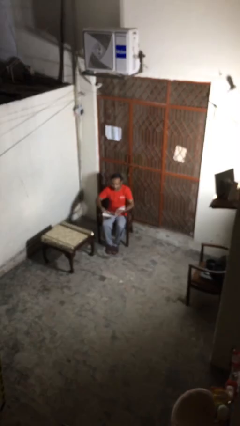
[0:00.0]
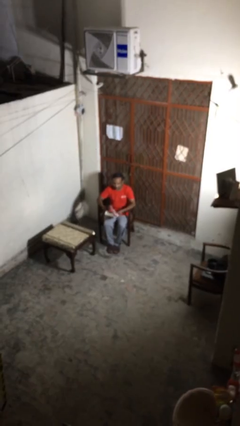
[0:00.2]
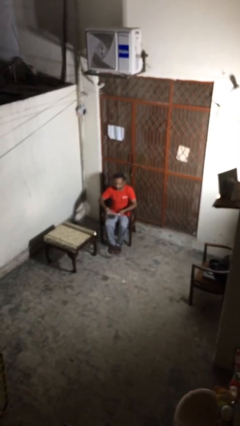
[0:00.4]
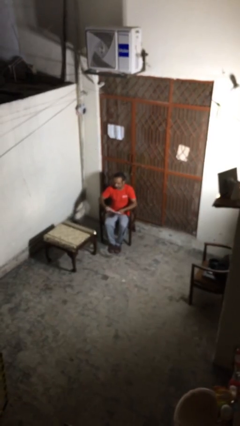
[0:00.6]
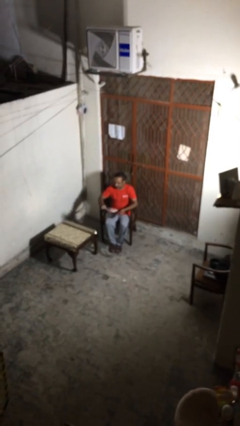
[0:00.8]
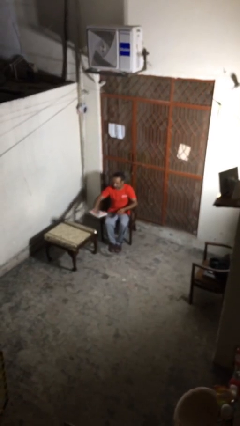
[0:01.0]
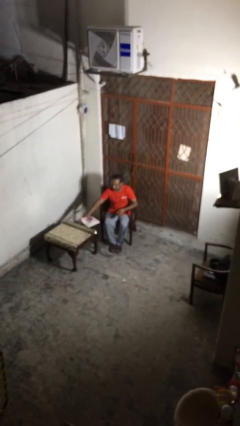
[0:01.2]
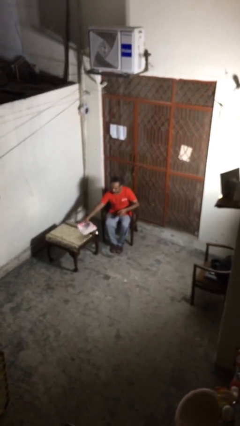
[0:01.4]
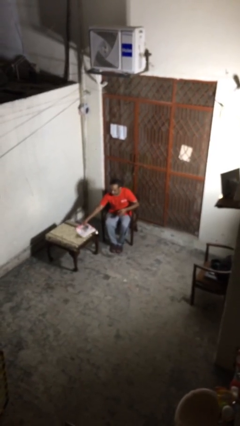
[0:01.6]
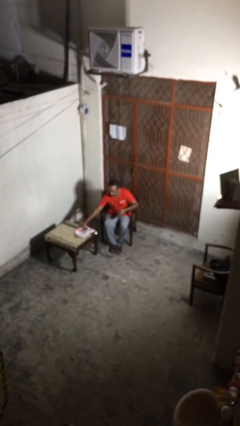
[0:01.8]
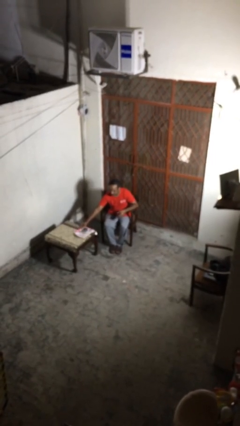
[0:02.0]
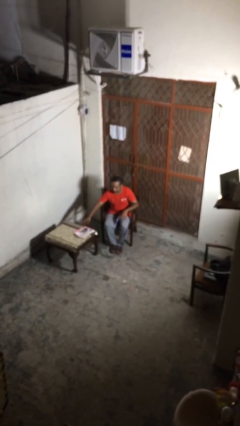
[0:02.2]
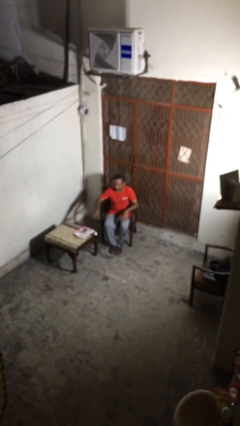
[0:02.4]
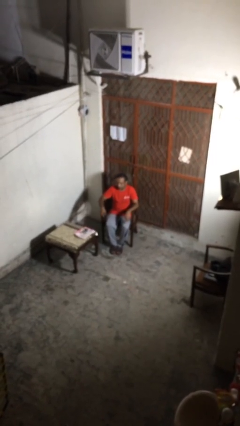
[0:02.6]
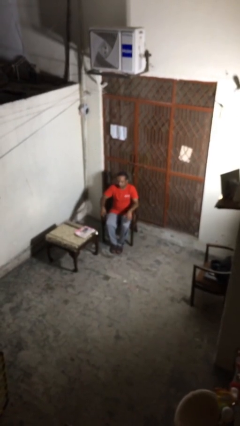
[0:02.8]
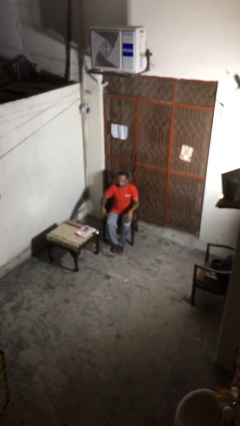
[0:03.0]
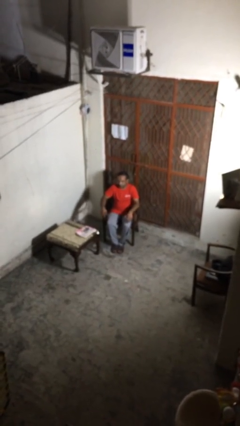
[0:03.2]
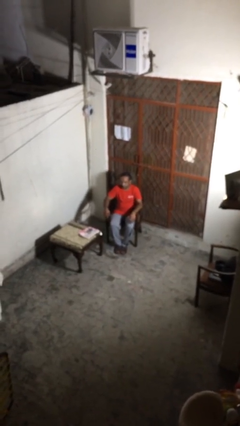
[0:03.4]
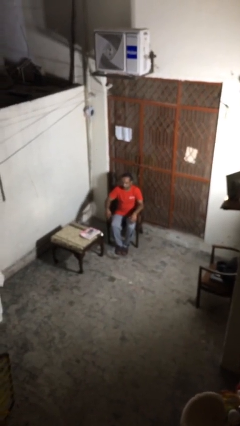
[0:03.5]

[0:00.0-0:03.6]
person puts down object on table

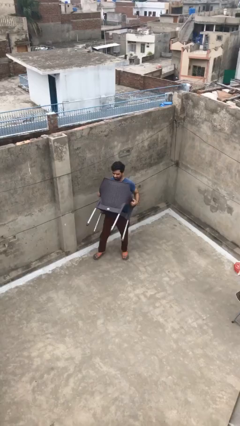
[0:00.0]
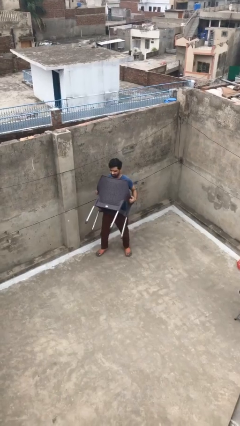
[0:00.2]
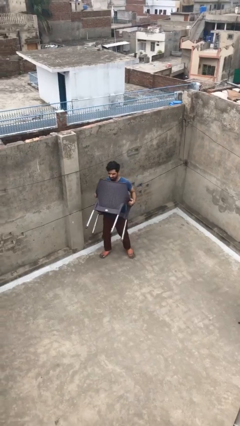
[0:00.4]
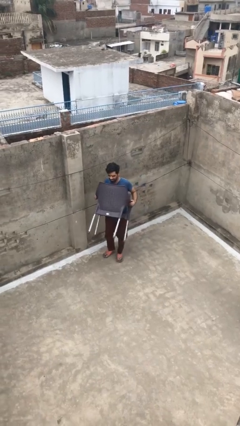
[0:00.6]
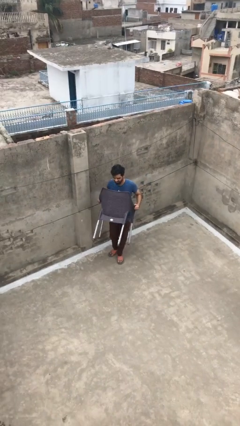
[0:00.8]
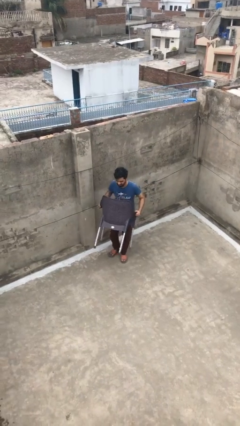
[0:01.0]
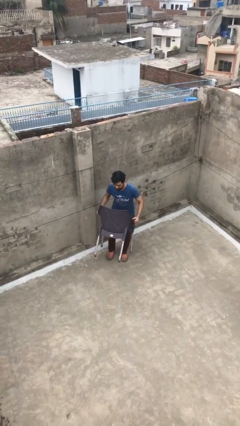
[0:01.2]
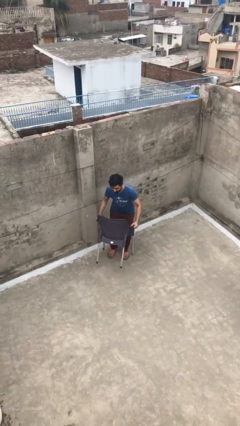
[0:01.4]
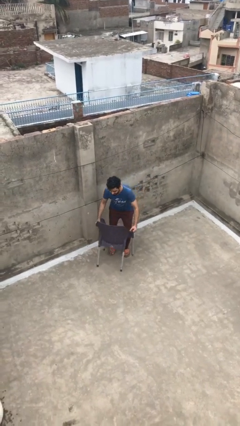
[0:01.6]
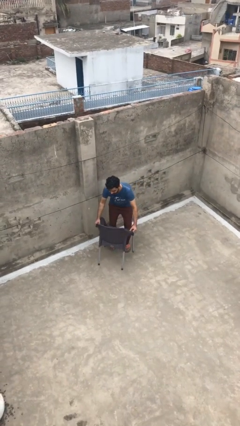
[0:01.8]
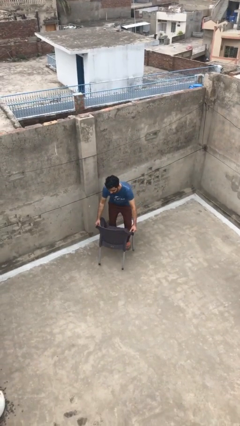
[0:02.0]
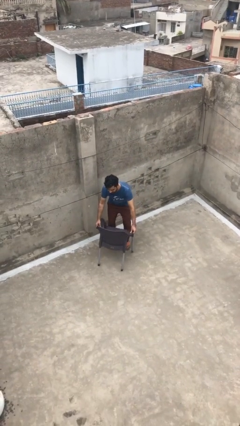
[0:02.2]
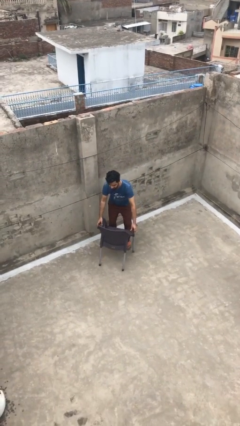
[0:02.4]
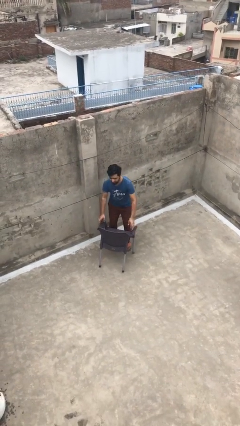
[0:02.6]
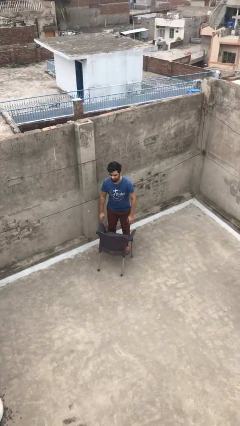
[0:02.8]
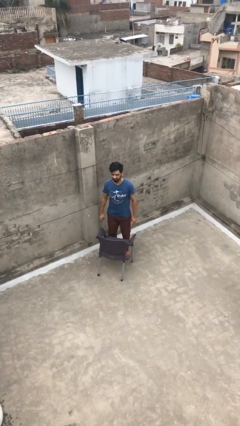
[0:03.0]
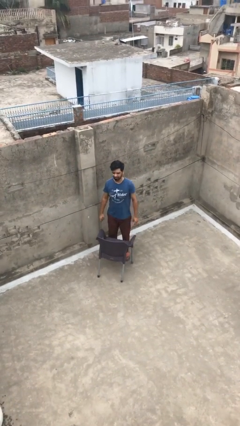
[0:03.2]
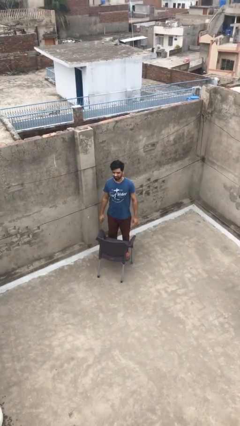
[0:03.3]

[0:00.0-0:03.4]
person puts down object on floor

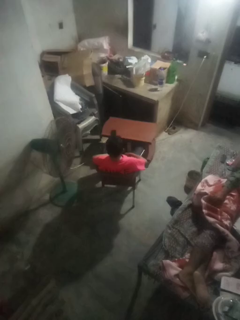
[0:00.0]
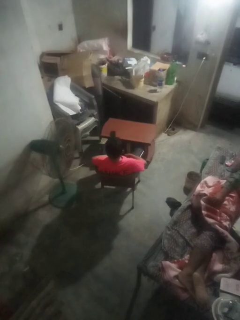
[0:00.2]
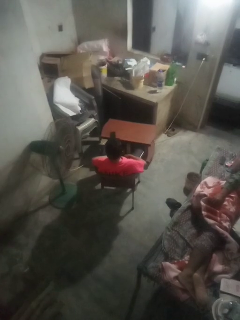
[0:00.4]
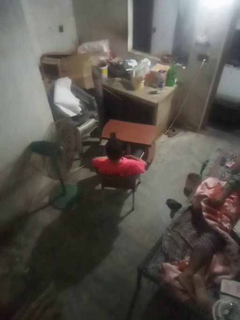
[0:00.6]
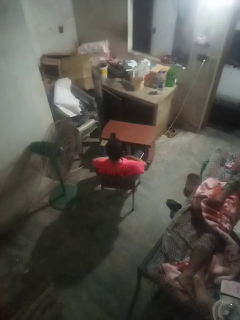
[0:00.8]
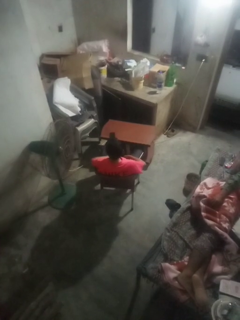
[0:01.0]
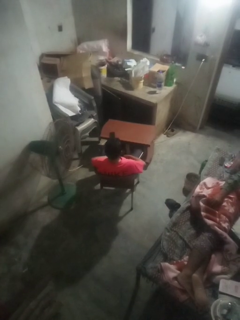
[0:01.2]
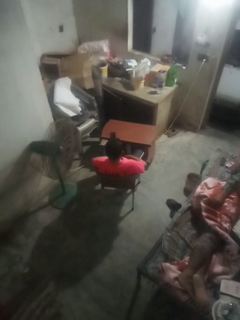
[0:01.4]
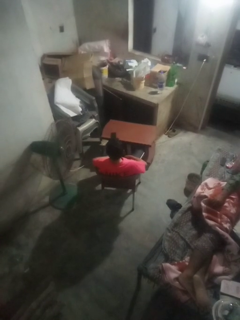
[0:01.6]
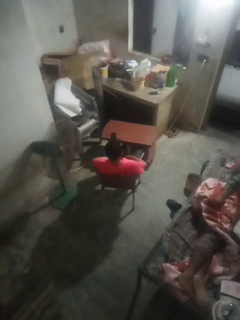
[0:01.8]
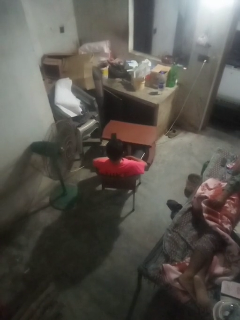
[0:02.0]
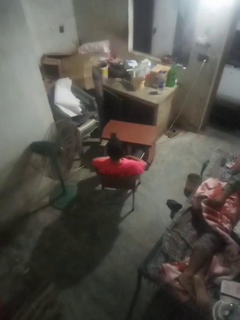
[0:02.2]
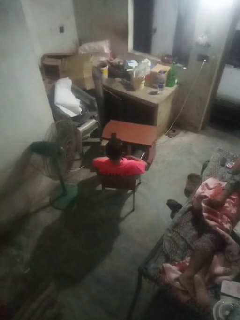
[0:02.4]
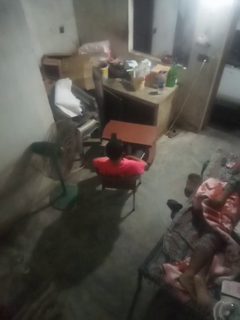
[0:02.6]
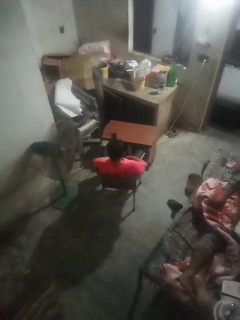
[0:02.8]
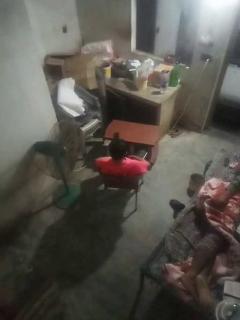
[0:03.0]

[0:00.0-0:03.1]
person shakes head

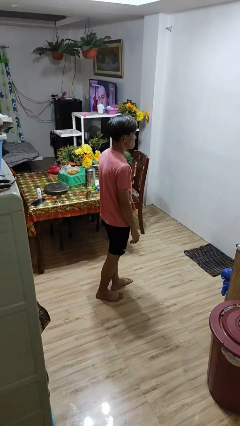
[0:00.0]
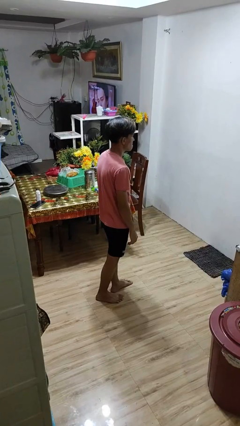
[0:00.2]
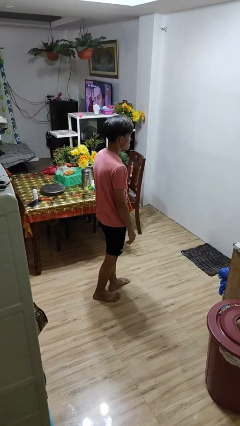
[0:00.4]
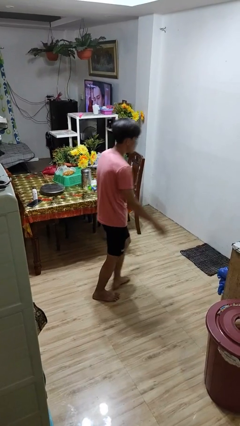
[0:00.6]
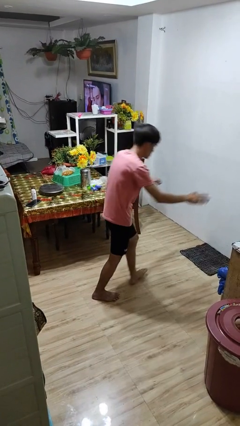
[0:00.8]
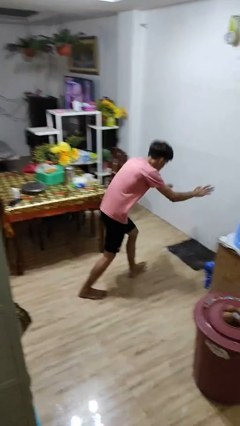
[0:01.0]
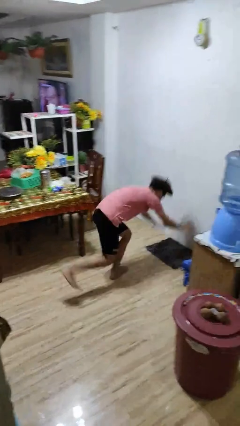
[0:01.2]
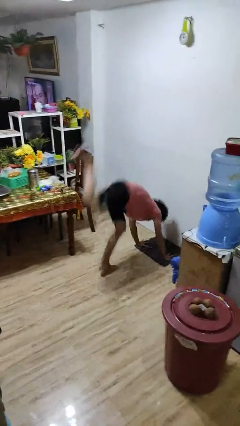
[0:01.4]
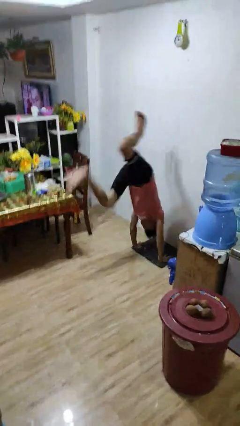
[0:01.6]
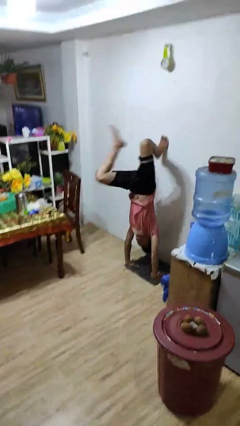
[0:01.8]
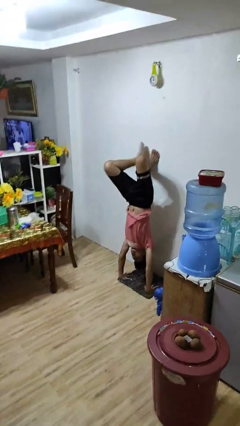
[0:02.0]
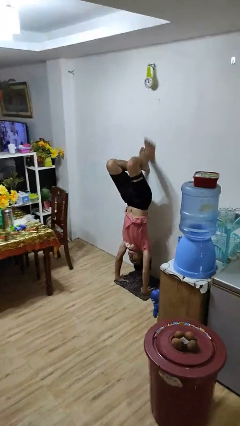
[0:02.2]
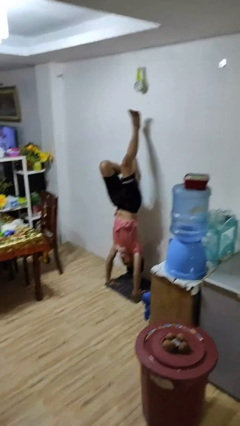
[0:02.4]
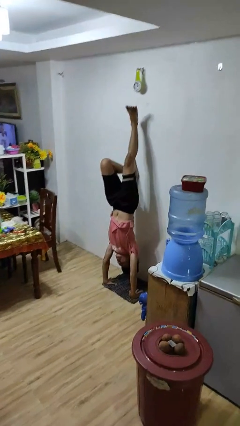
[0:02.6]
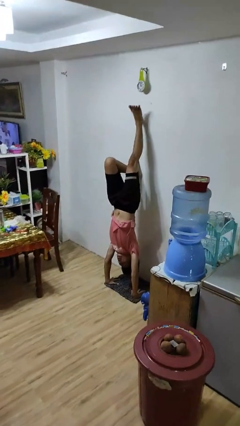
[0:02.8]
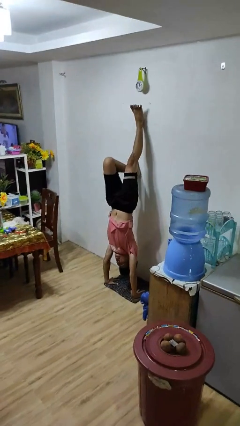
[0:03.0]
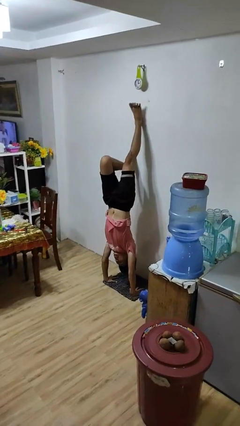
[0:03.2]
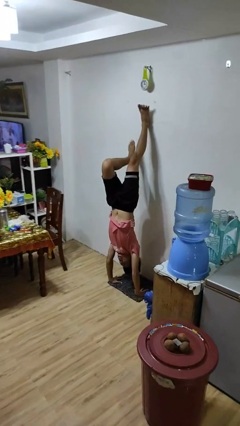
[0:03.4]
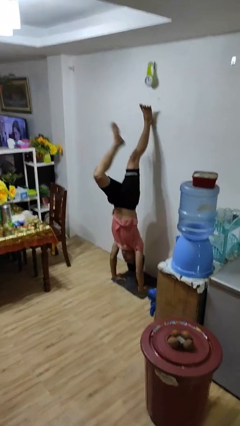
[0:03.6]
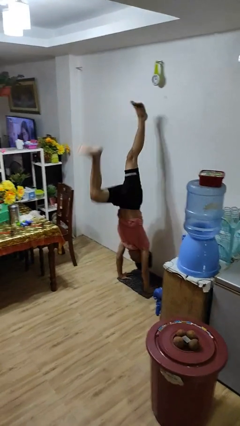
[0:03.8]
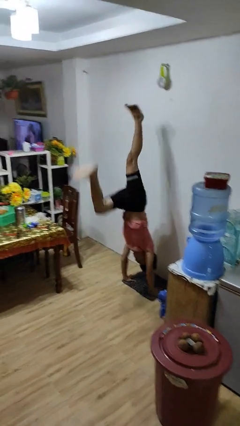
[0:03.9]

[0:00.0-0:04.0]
person handstand

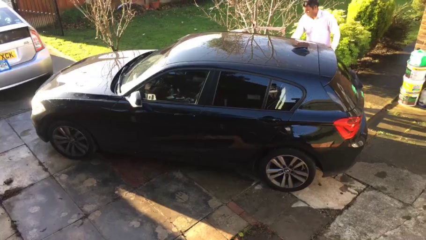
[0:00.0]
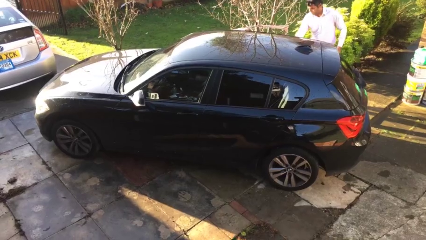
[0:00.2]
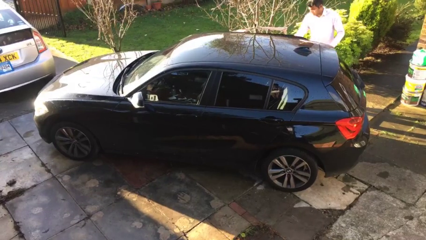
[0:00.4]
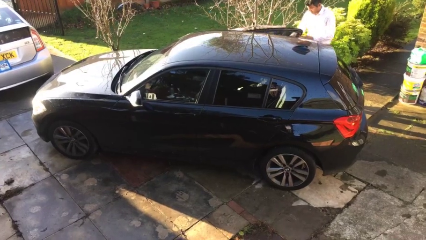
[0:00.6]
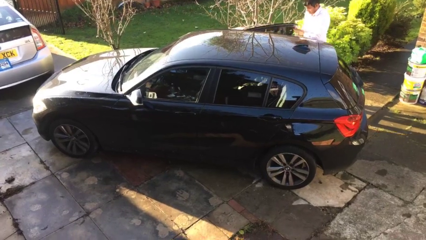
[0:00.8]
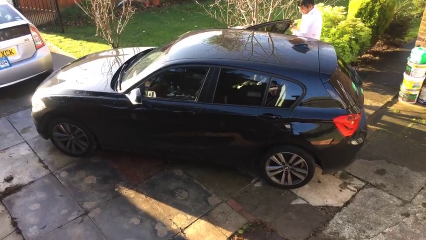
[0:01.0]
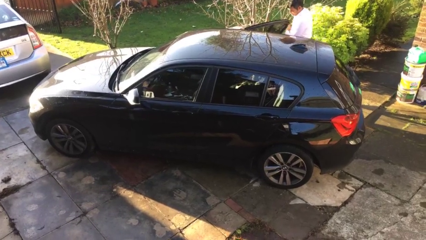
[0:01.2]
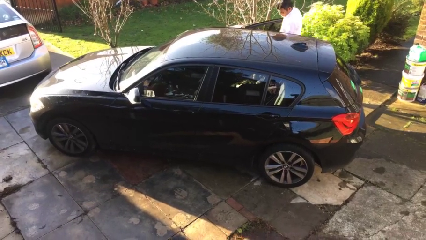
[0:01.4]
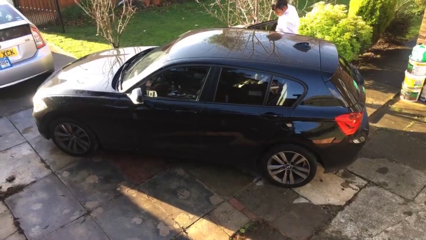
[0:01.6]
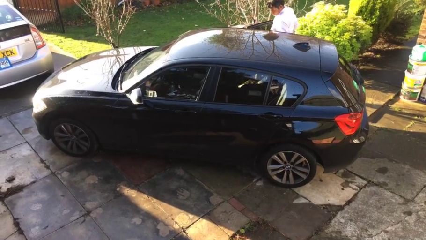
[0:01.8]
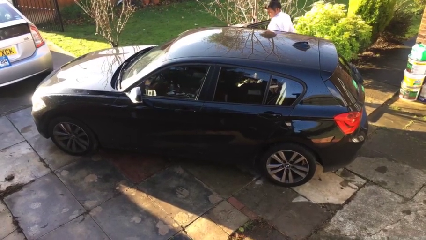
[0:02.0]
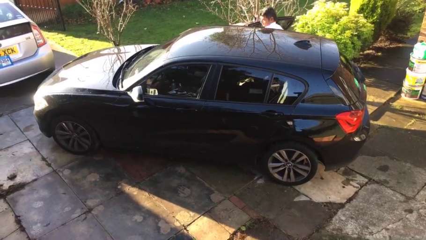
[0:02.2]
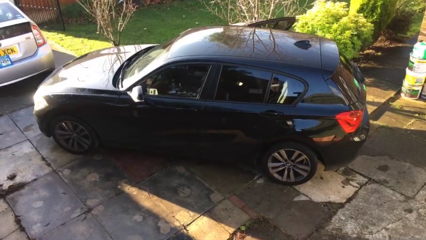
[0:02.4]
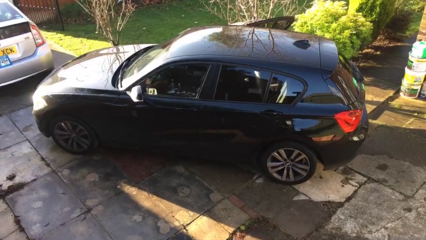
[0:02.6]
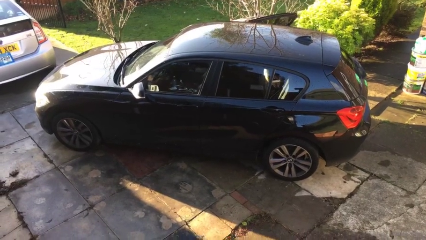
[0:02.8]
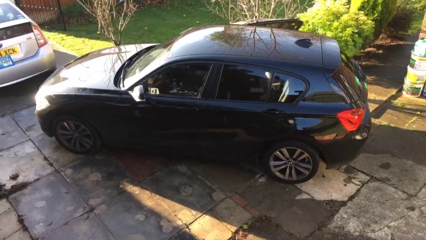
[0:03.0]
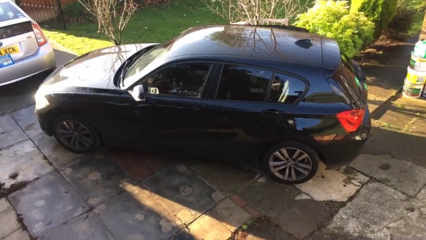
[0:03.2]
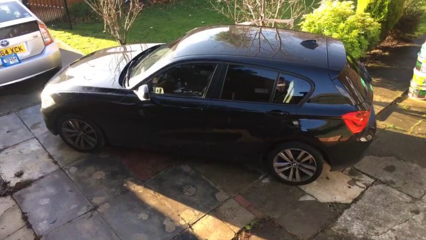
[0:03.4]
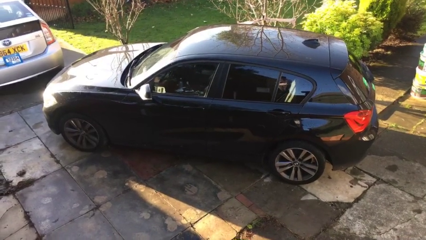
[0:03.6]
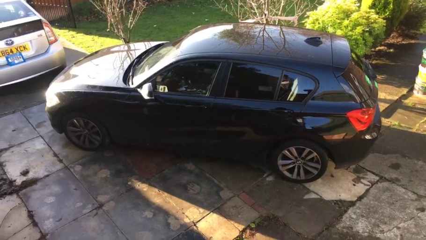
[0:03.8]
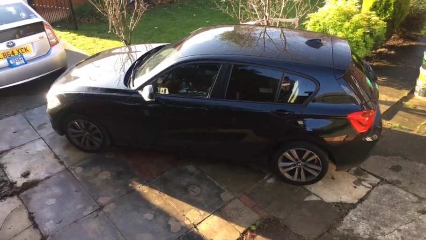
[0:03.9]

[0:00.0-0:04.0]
car picks up person

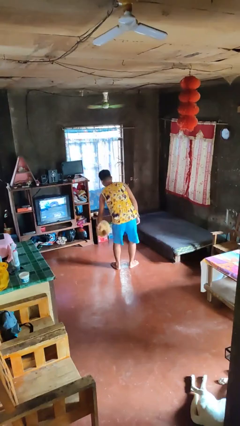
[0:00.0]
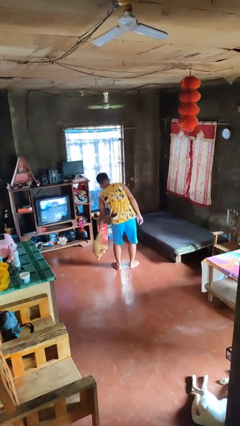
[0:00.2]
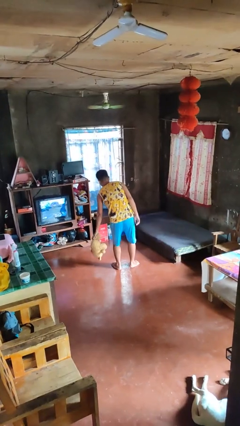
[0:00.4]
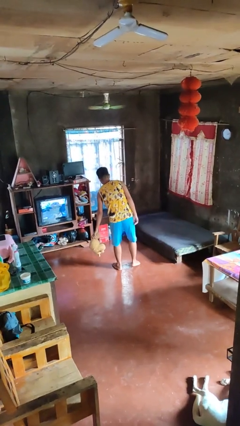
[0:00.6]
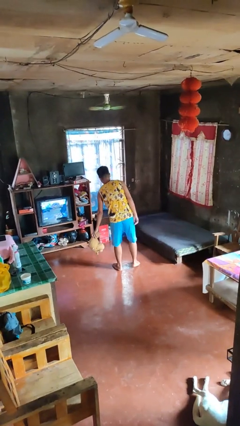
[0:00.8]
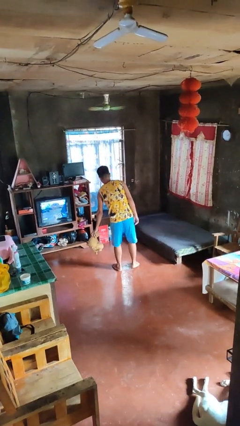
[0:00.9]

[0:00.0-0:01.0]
person catches dropped object
